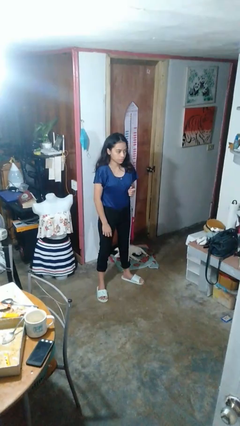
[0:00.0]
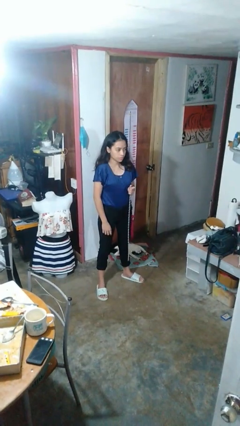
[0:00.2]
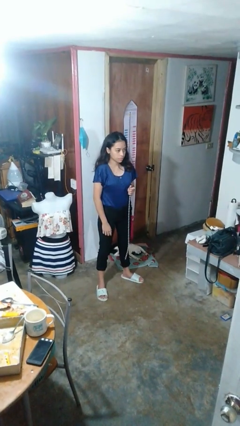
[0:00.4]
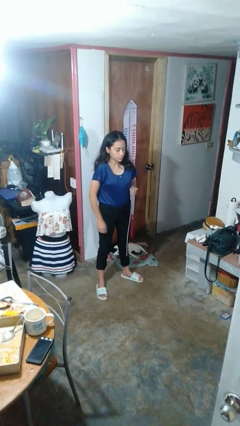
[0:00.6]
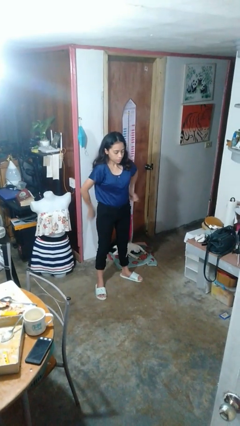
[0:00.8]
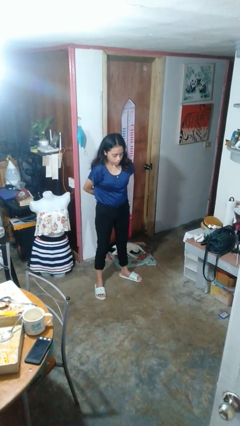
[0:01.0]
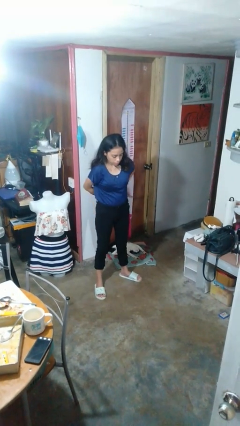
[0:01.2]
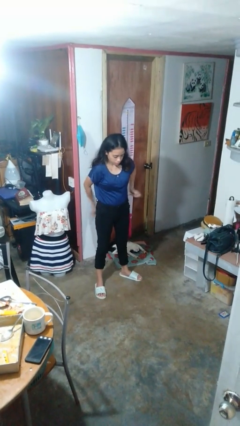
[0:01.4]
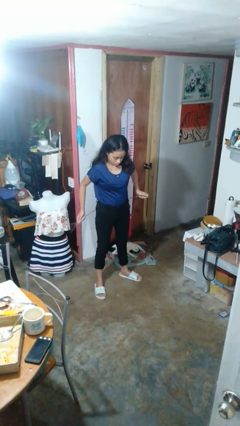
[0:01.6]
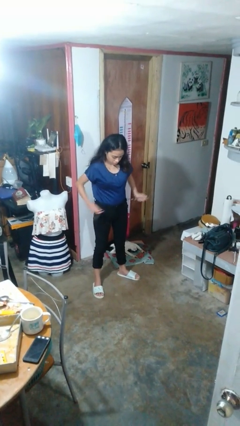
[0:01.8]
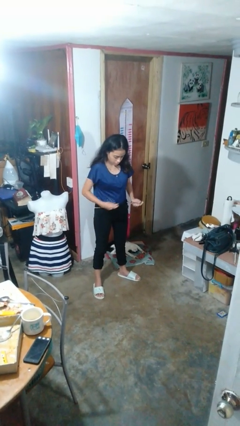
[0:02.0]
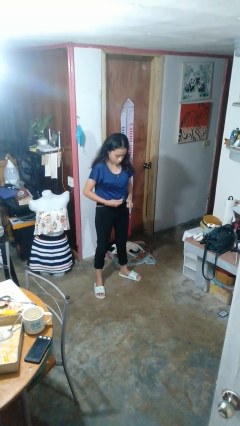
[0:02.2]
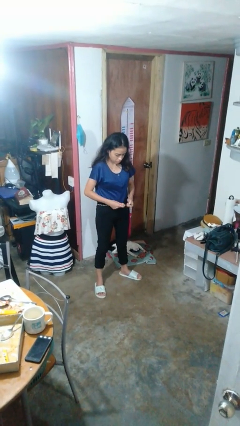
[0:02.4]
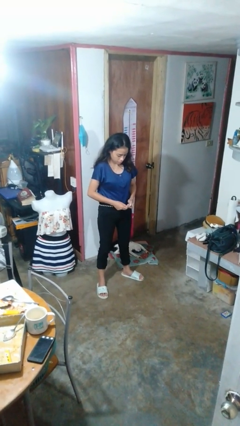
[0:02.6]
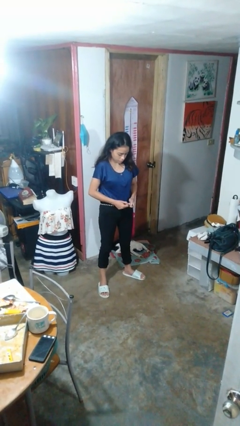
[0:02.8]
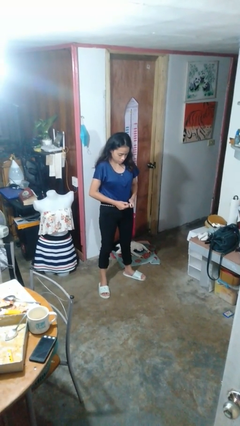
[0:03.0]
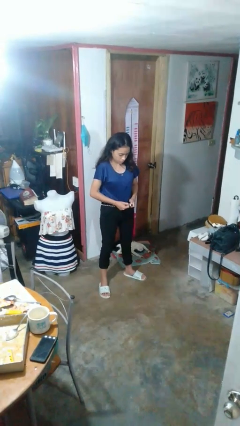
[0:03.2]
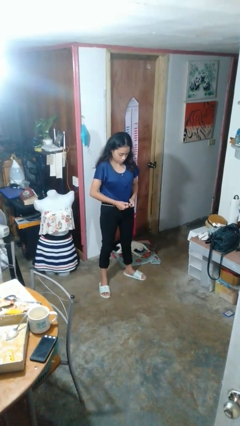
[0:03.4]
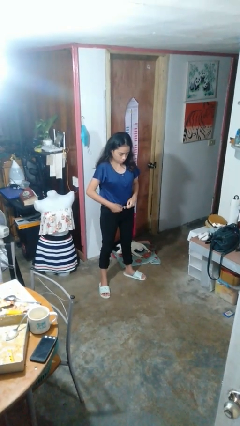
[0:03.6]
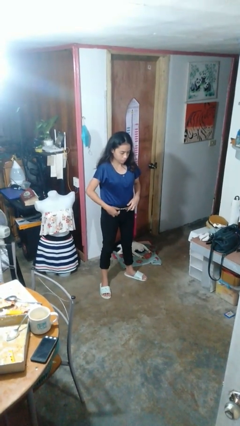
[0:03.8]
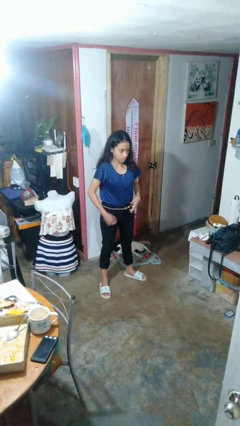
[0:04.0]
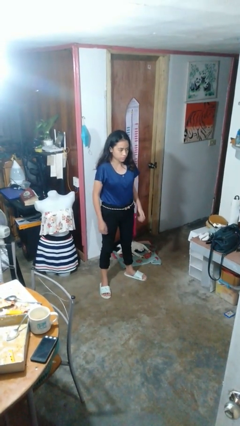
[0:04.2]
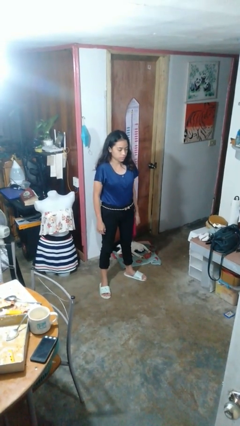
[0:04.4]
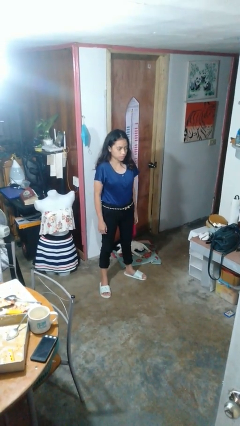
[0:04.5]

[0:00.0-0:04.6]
person puts on belt

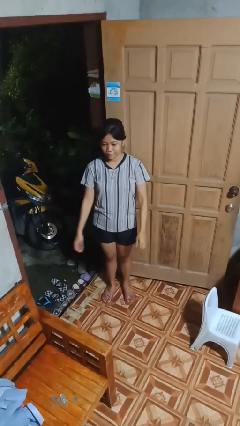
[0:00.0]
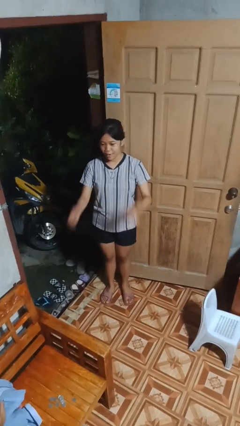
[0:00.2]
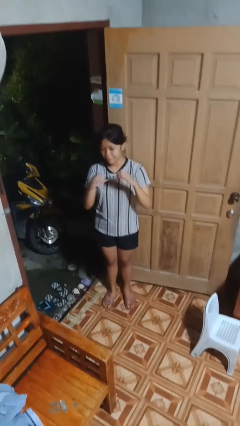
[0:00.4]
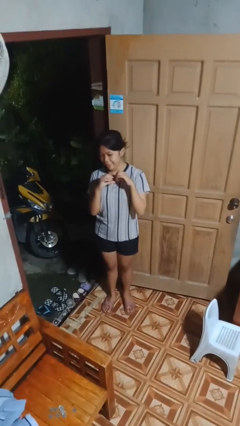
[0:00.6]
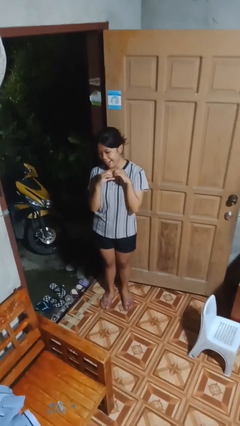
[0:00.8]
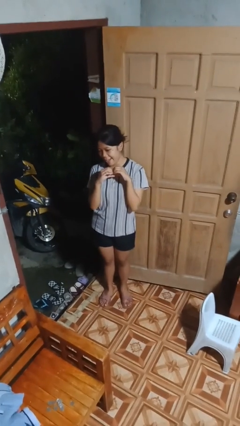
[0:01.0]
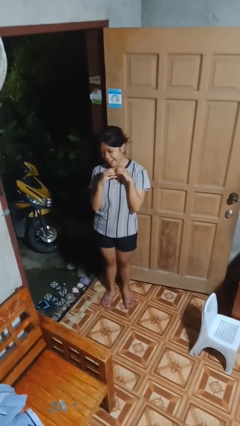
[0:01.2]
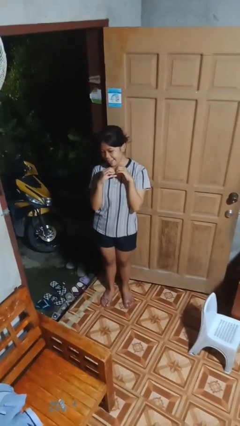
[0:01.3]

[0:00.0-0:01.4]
person gestures heart

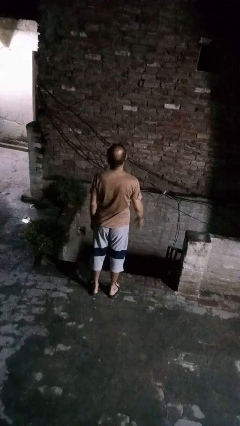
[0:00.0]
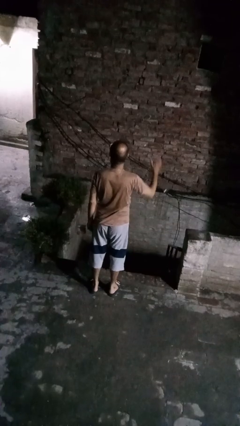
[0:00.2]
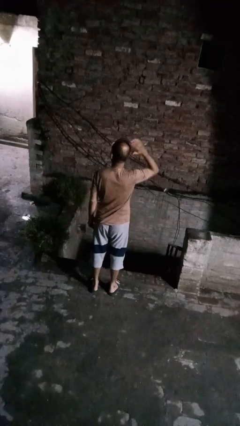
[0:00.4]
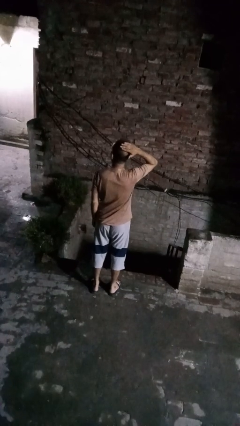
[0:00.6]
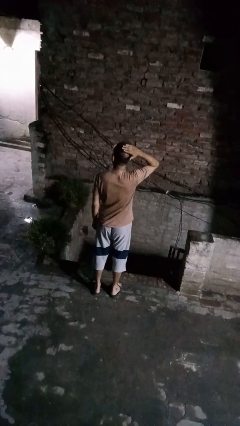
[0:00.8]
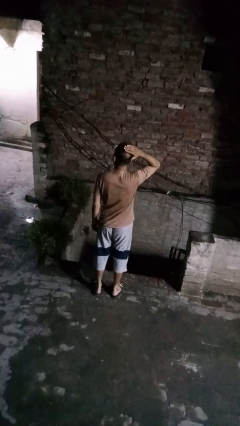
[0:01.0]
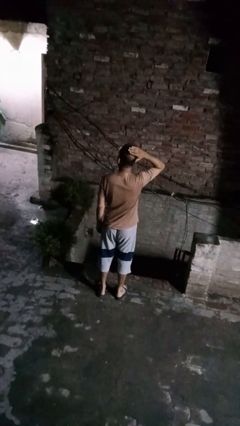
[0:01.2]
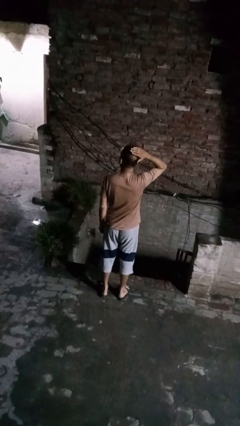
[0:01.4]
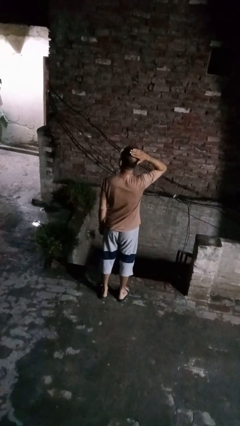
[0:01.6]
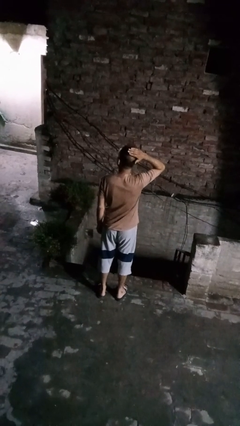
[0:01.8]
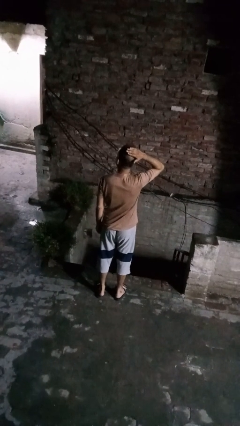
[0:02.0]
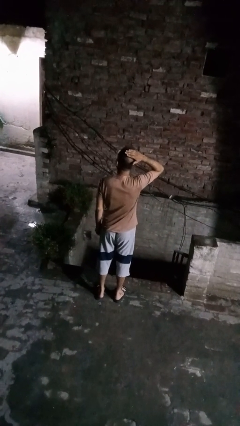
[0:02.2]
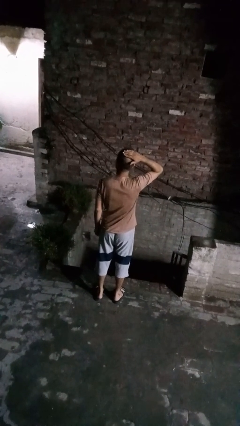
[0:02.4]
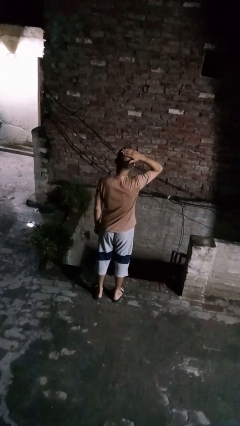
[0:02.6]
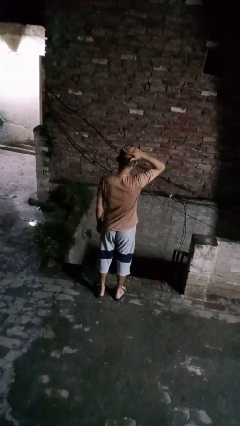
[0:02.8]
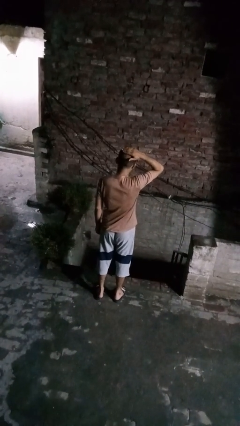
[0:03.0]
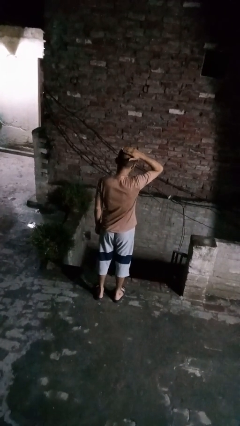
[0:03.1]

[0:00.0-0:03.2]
person pats head

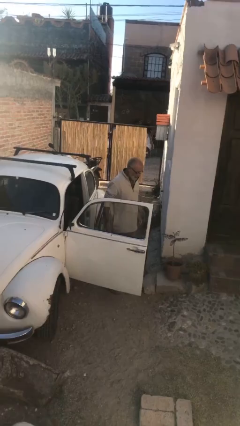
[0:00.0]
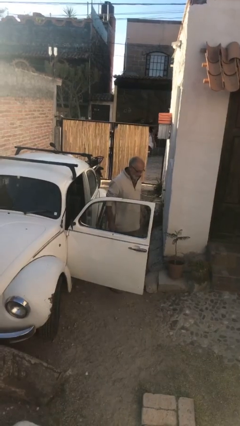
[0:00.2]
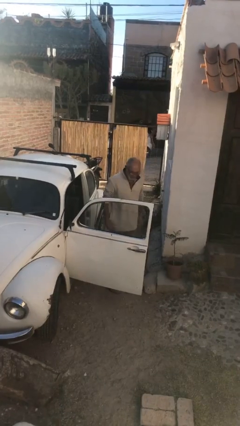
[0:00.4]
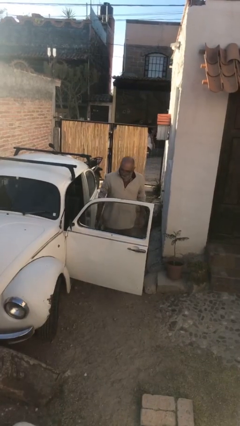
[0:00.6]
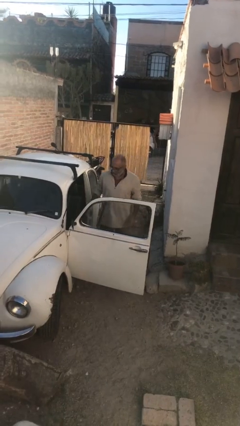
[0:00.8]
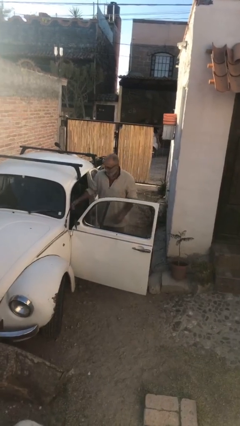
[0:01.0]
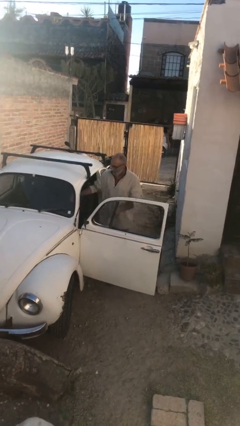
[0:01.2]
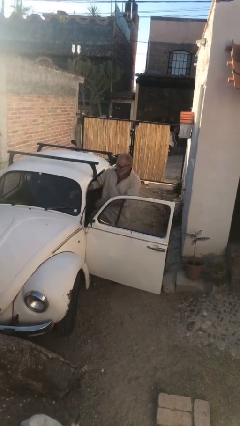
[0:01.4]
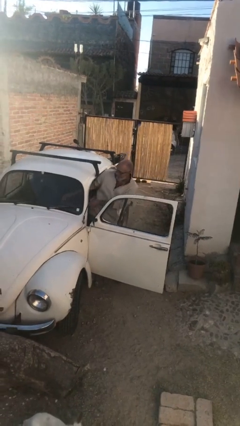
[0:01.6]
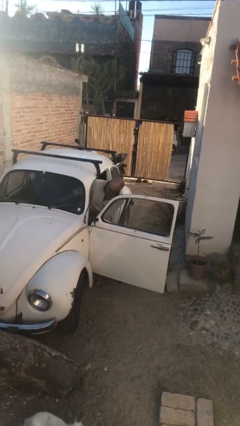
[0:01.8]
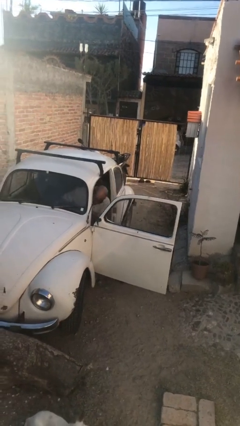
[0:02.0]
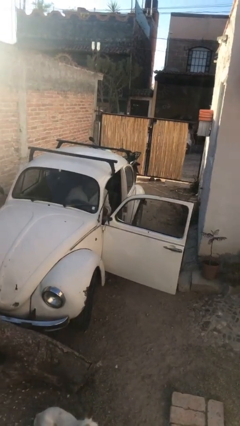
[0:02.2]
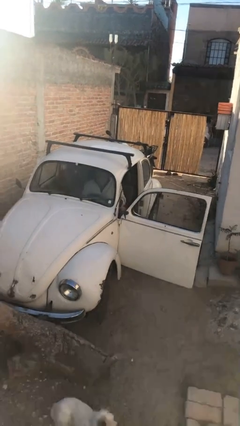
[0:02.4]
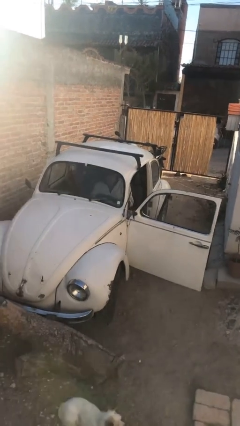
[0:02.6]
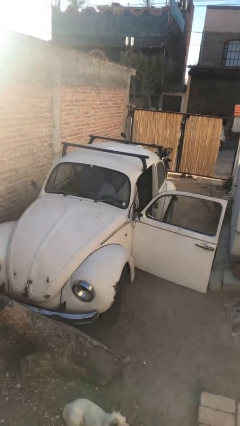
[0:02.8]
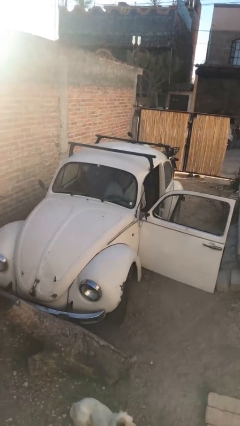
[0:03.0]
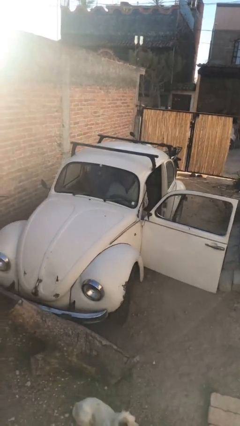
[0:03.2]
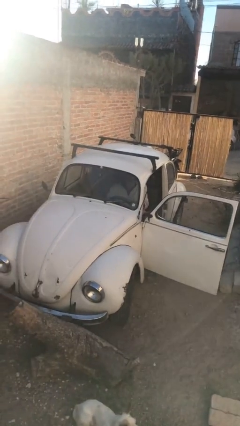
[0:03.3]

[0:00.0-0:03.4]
person enters car

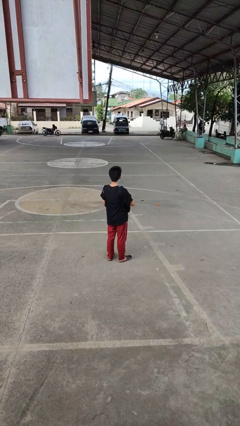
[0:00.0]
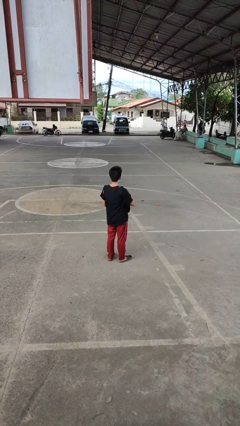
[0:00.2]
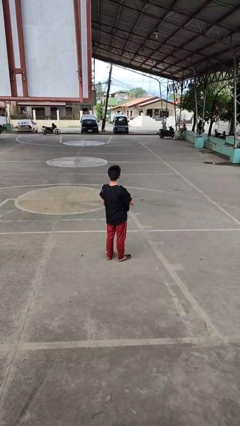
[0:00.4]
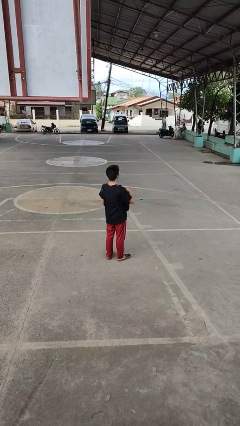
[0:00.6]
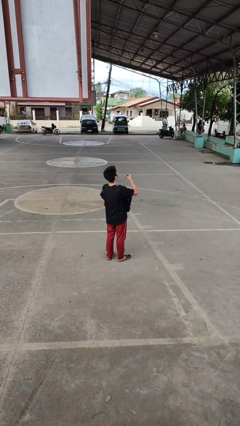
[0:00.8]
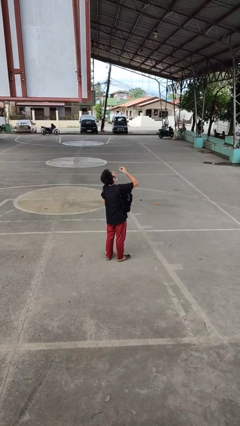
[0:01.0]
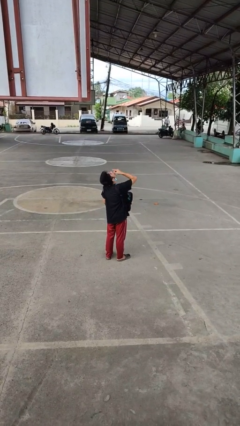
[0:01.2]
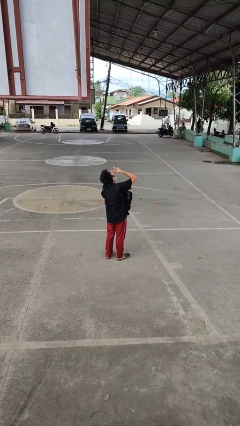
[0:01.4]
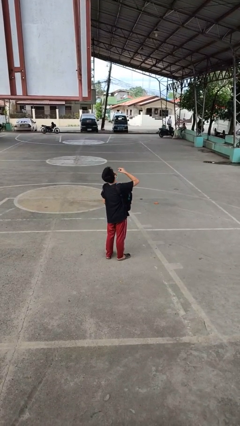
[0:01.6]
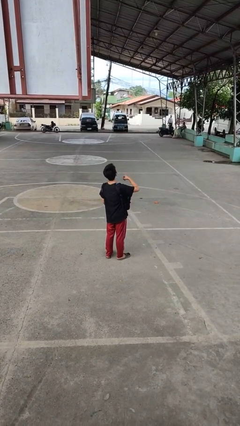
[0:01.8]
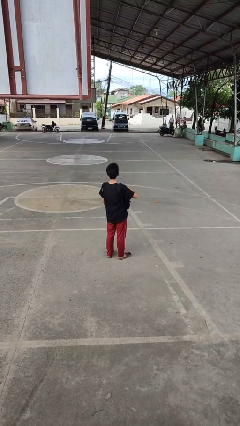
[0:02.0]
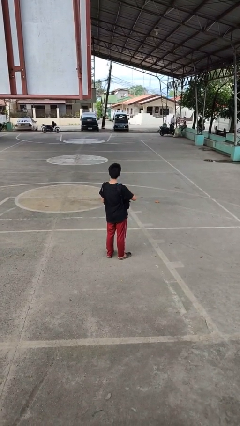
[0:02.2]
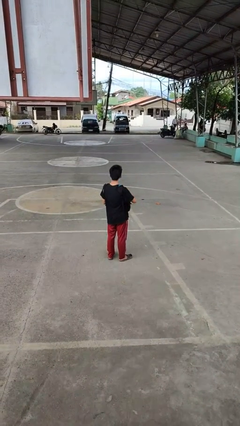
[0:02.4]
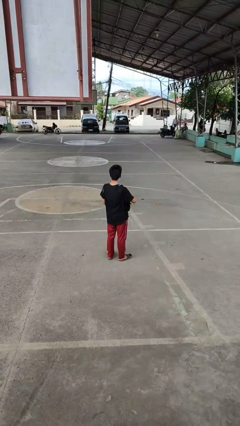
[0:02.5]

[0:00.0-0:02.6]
person eats snack from bag

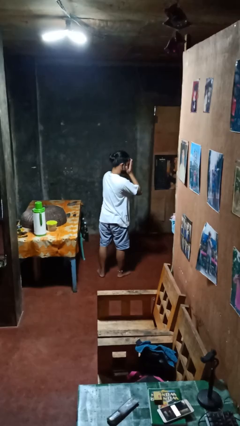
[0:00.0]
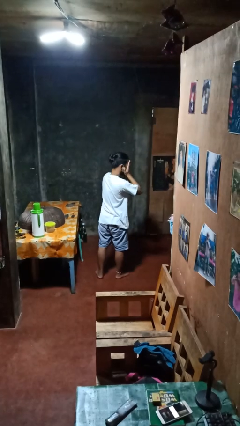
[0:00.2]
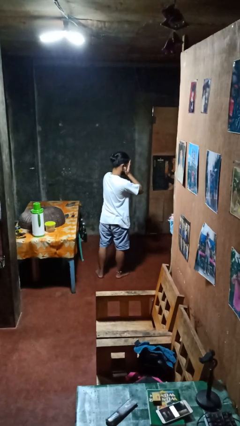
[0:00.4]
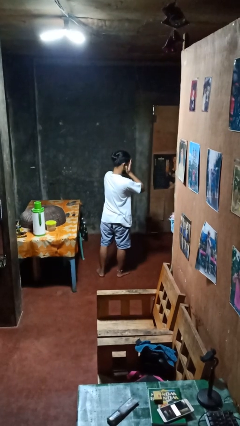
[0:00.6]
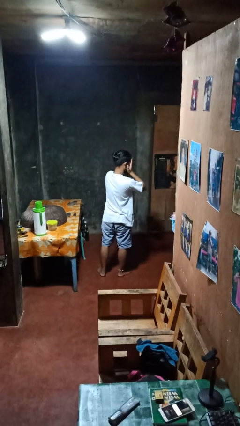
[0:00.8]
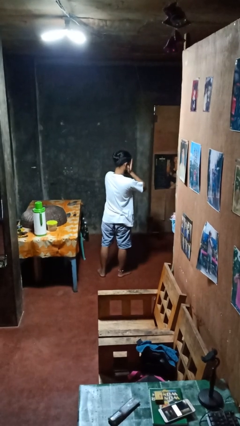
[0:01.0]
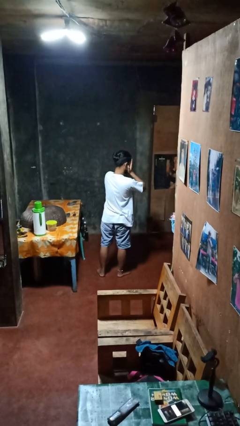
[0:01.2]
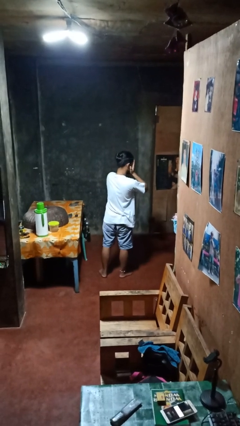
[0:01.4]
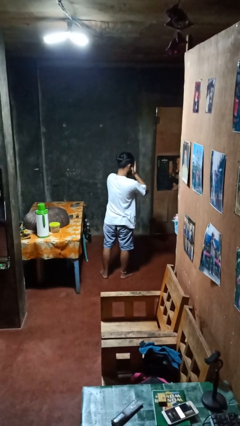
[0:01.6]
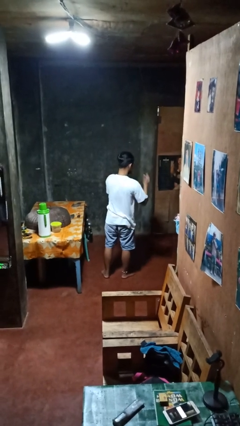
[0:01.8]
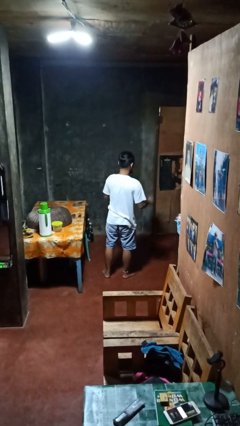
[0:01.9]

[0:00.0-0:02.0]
person covers face with hands
